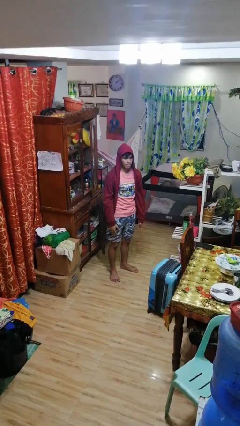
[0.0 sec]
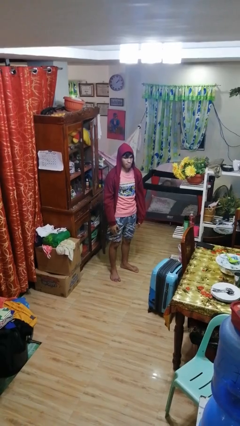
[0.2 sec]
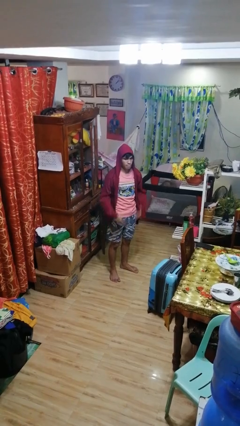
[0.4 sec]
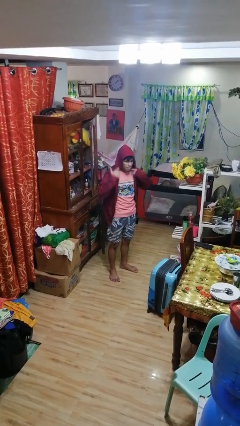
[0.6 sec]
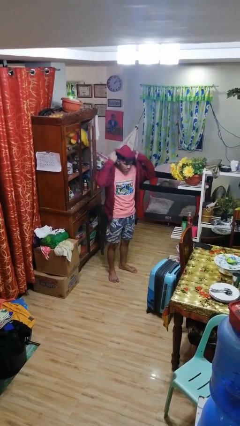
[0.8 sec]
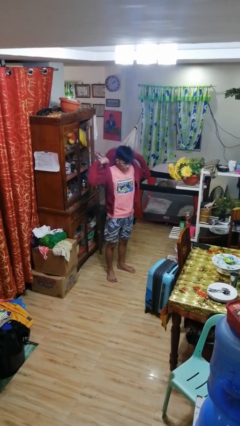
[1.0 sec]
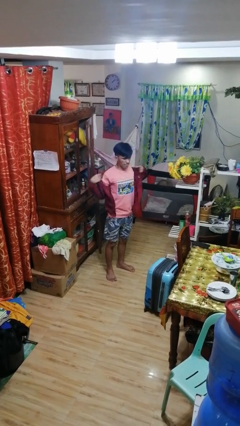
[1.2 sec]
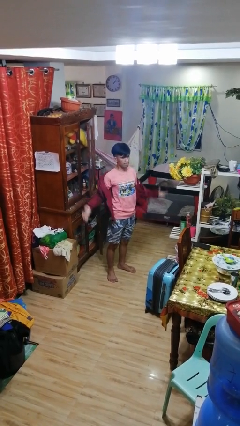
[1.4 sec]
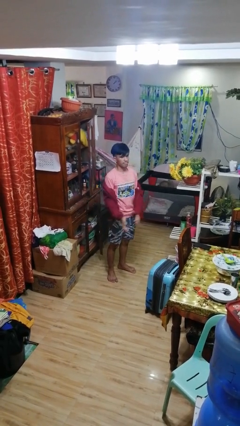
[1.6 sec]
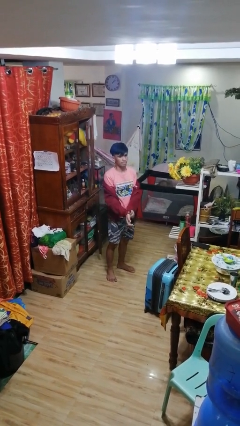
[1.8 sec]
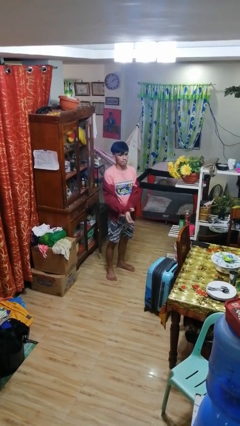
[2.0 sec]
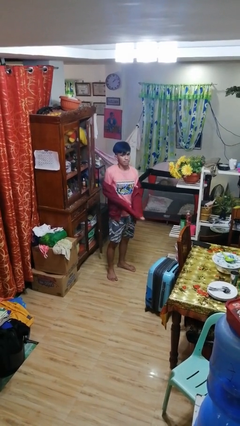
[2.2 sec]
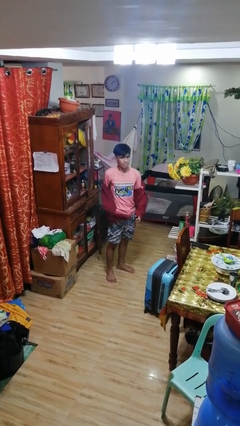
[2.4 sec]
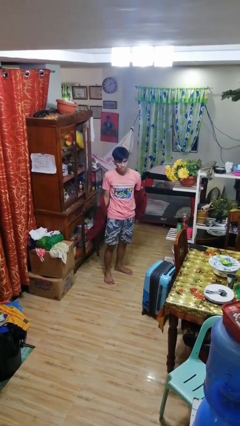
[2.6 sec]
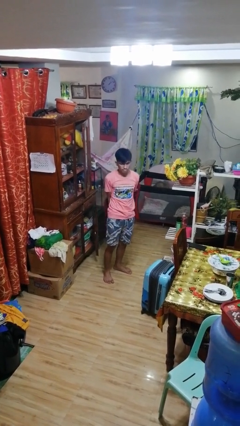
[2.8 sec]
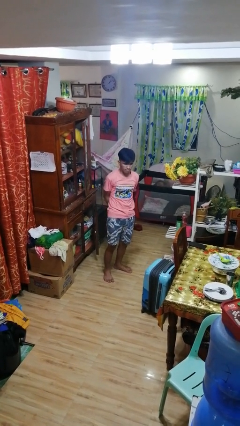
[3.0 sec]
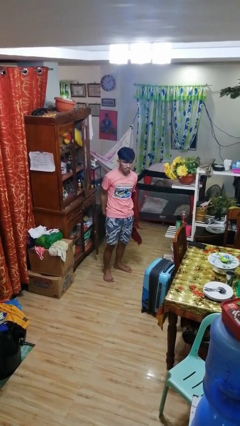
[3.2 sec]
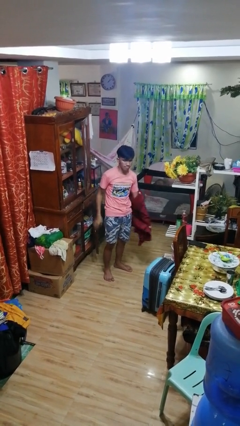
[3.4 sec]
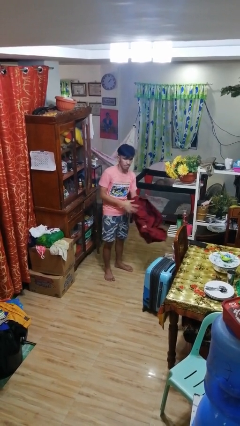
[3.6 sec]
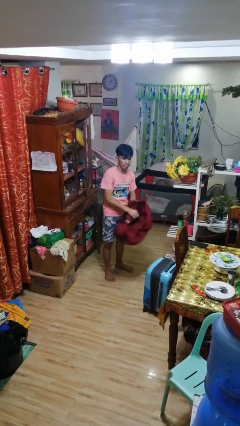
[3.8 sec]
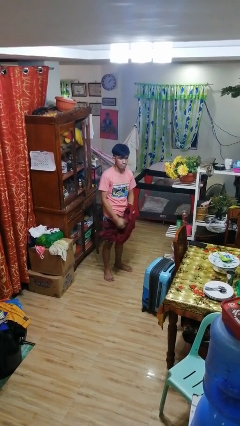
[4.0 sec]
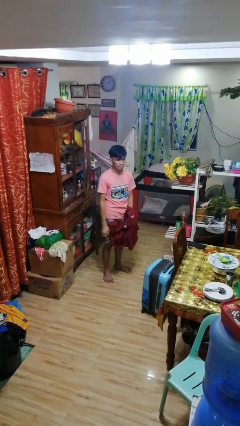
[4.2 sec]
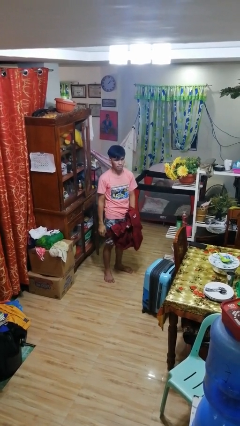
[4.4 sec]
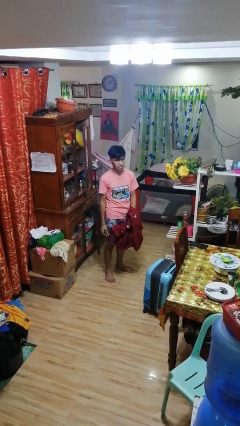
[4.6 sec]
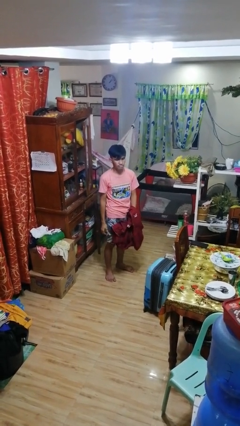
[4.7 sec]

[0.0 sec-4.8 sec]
person takes off hoodie

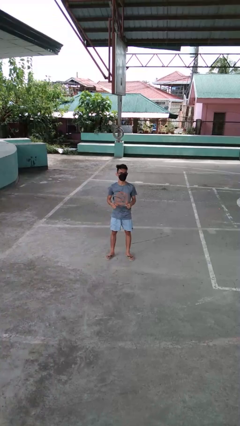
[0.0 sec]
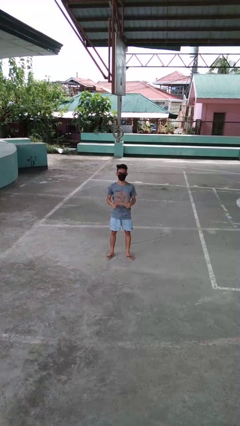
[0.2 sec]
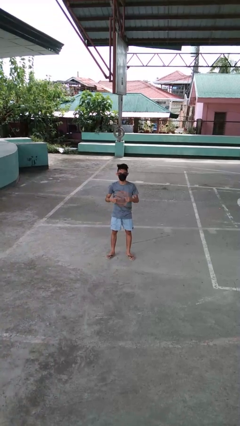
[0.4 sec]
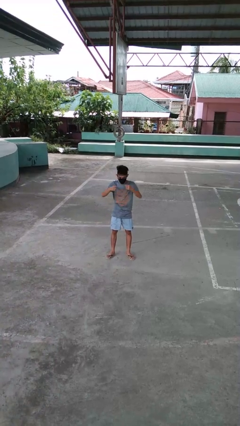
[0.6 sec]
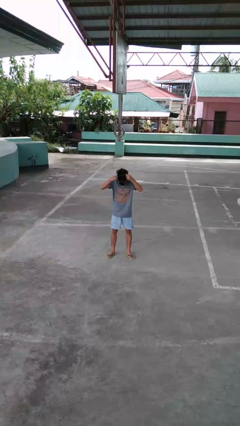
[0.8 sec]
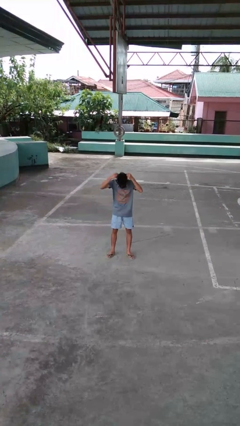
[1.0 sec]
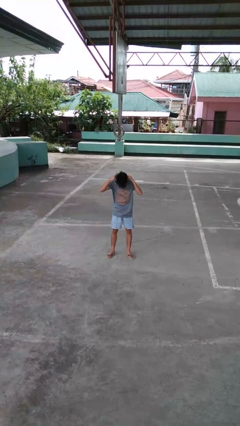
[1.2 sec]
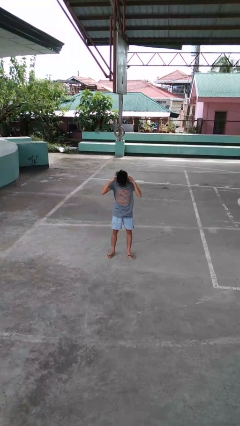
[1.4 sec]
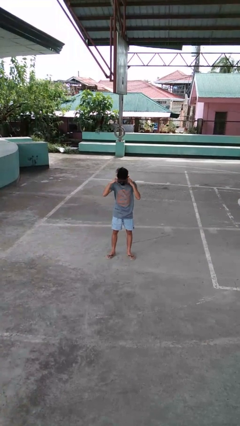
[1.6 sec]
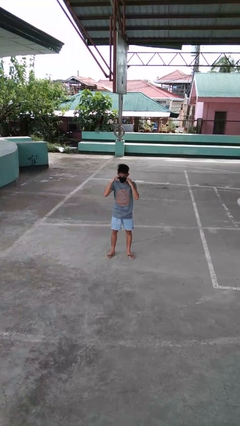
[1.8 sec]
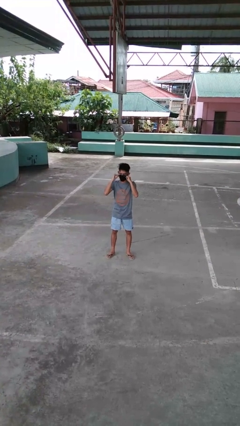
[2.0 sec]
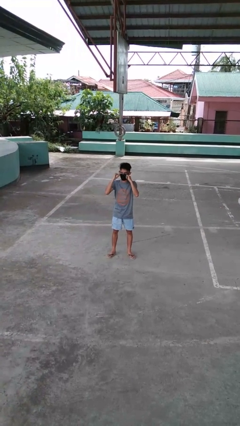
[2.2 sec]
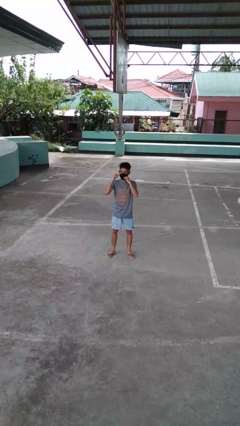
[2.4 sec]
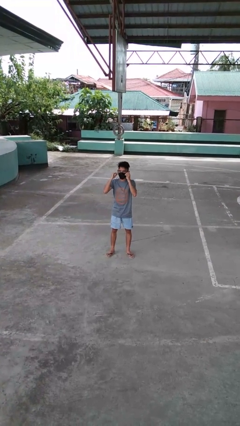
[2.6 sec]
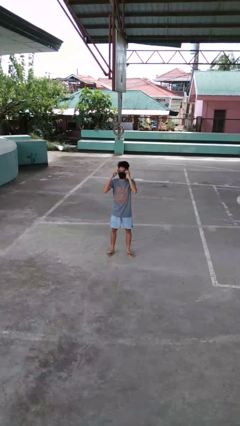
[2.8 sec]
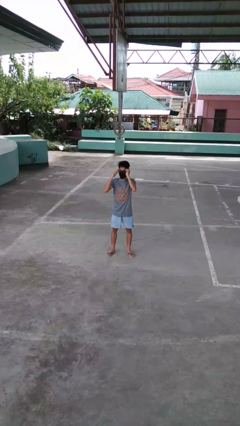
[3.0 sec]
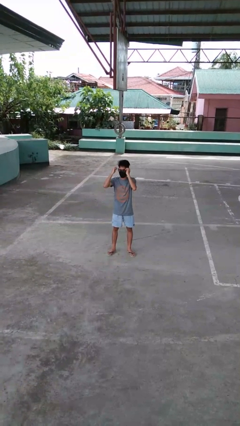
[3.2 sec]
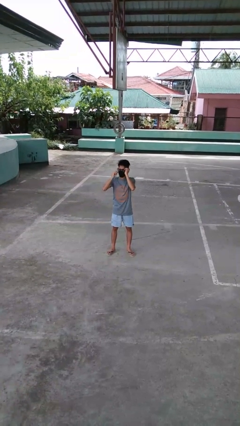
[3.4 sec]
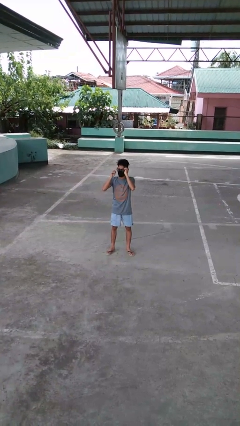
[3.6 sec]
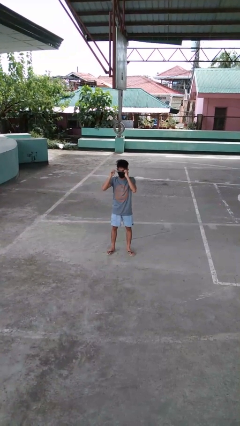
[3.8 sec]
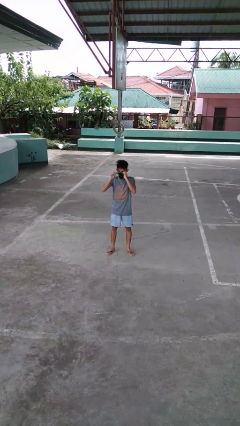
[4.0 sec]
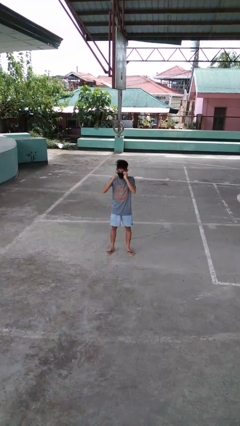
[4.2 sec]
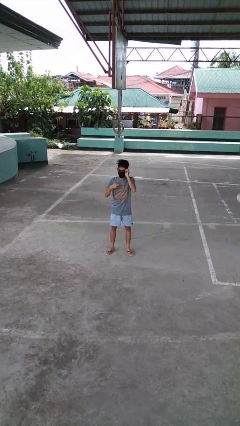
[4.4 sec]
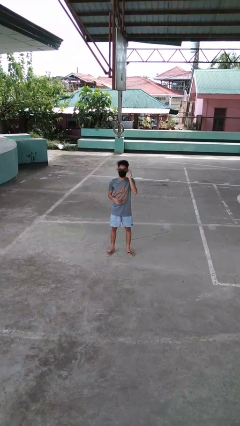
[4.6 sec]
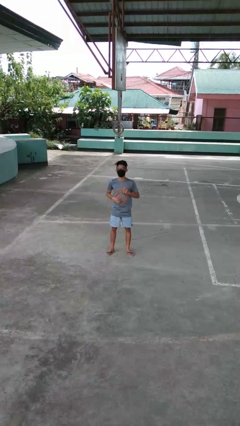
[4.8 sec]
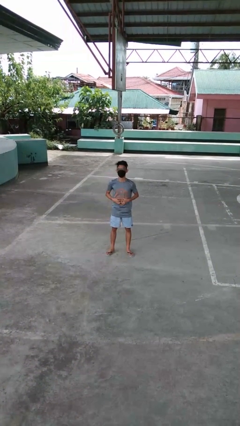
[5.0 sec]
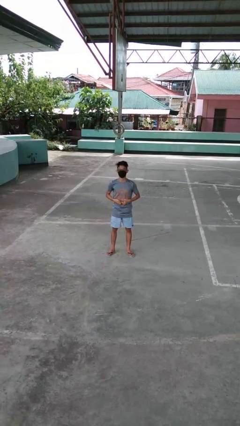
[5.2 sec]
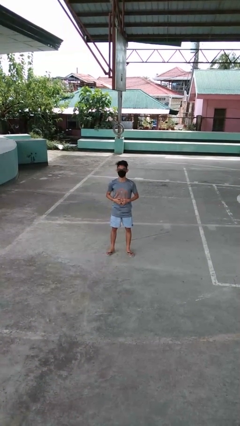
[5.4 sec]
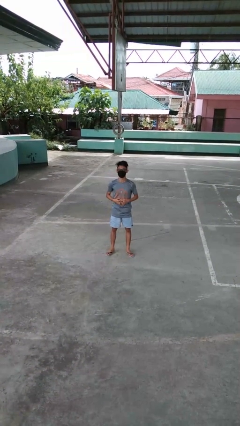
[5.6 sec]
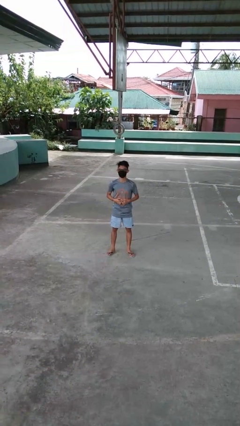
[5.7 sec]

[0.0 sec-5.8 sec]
person puts on necklace

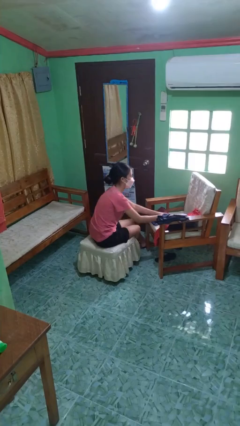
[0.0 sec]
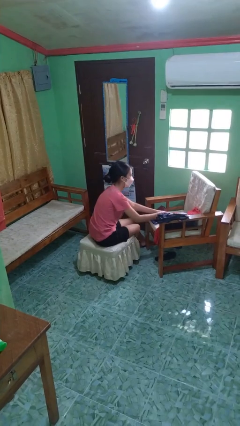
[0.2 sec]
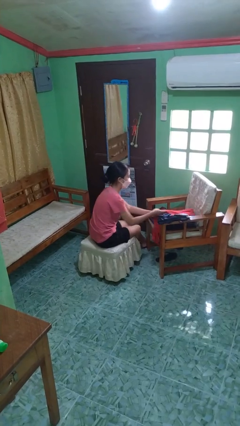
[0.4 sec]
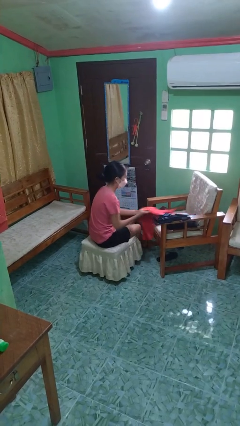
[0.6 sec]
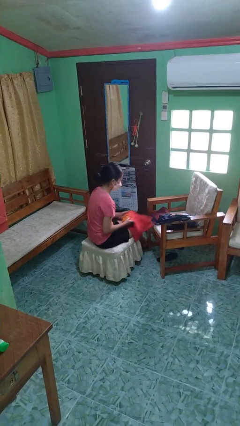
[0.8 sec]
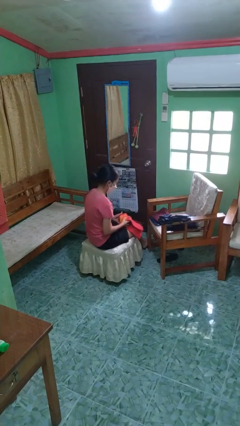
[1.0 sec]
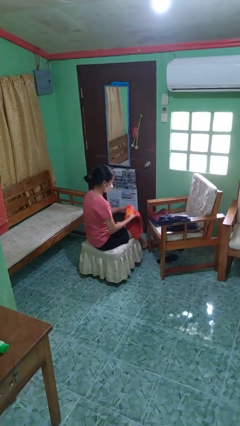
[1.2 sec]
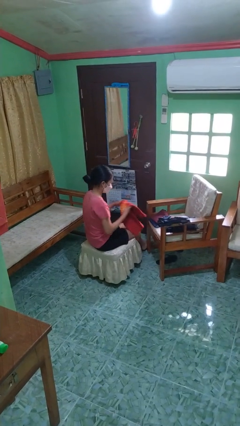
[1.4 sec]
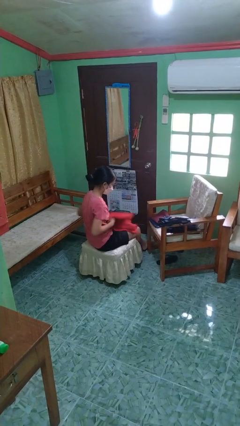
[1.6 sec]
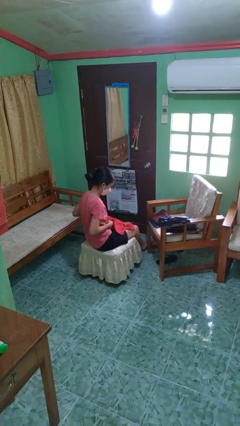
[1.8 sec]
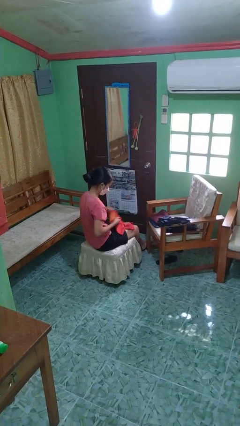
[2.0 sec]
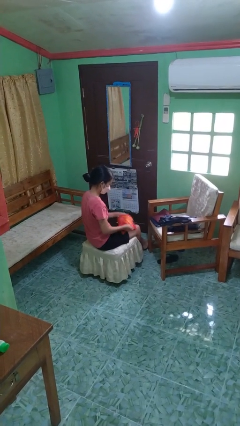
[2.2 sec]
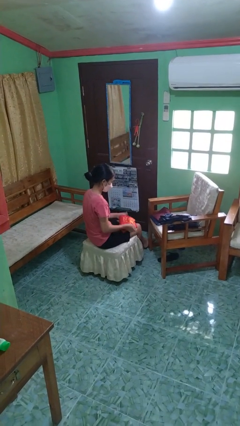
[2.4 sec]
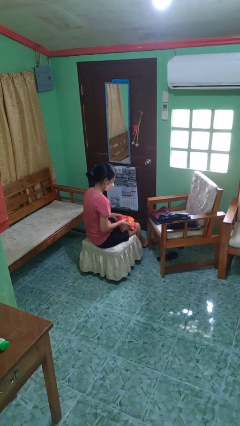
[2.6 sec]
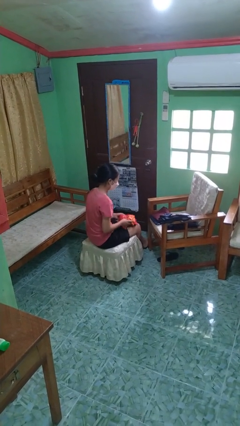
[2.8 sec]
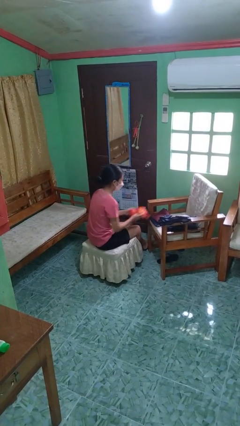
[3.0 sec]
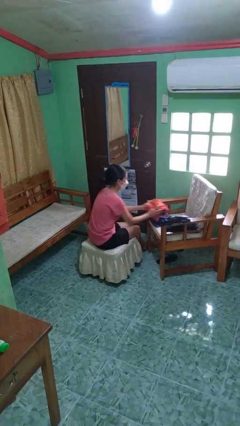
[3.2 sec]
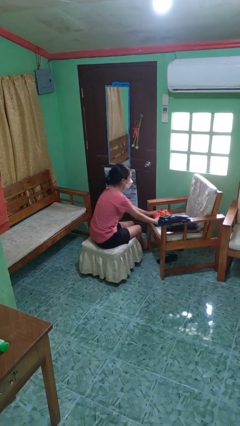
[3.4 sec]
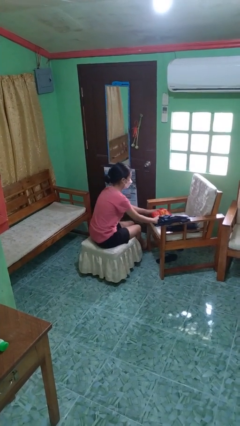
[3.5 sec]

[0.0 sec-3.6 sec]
person folds shirt

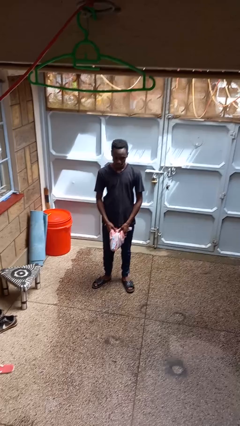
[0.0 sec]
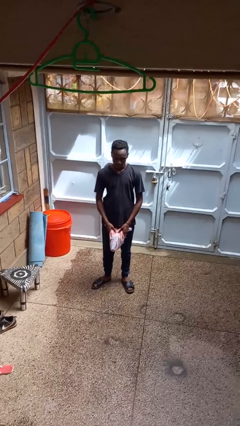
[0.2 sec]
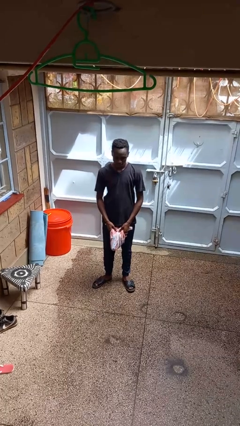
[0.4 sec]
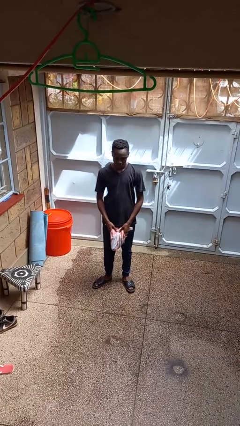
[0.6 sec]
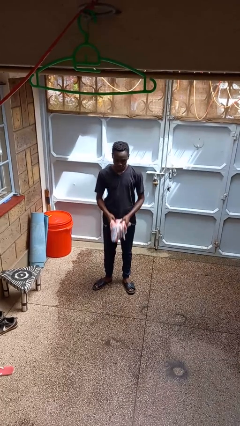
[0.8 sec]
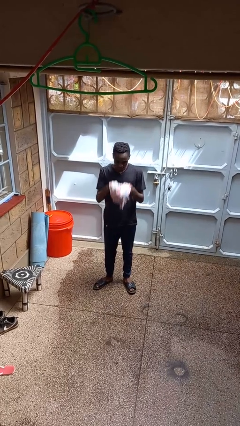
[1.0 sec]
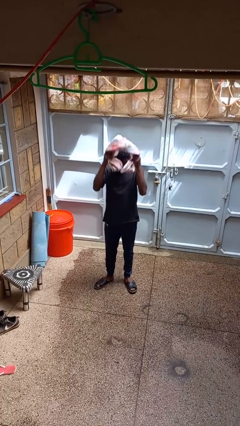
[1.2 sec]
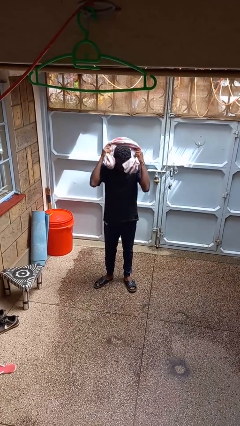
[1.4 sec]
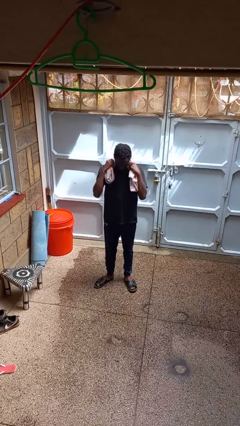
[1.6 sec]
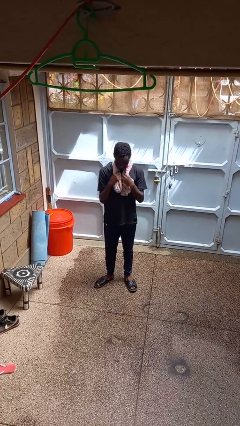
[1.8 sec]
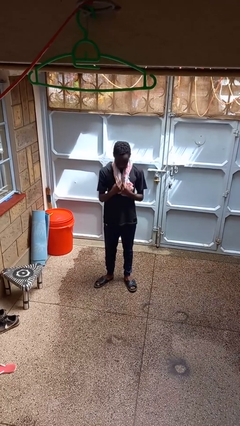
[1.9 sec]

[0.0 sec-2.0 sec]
person puts on scarf

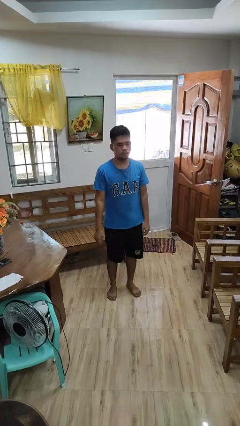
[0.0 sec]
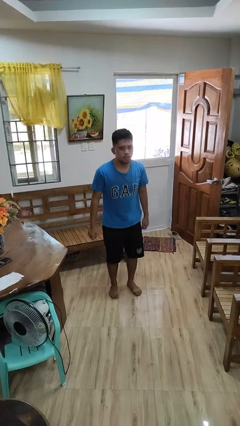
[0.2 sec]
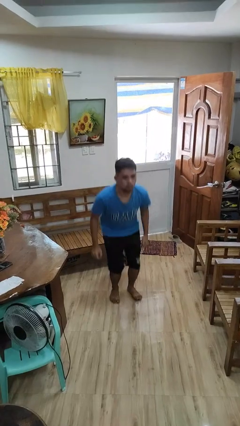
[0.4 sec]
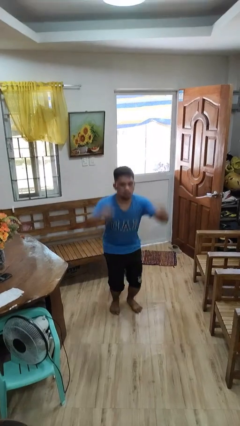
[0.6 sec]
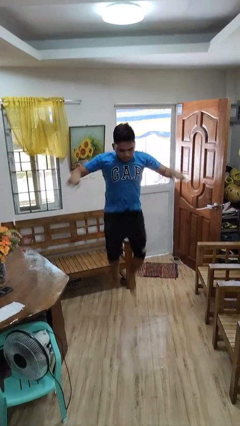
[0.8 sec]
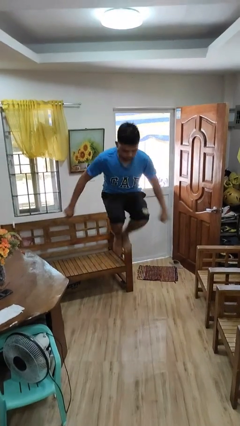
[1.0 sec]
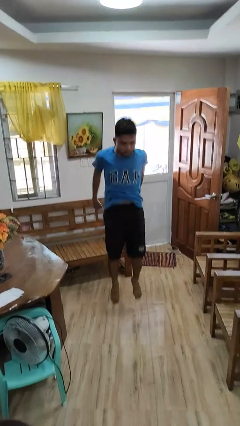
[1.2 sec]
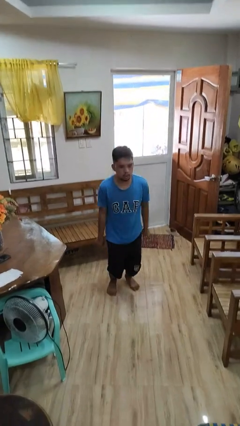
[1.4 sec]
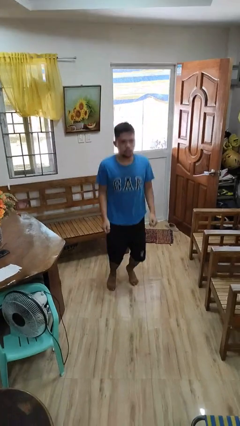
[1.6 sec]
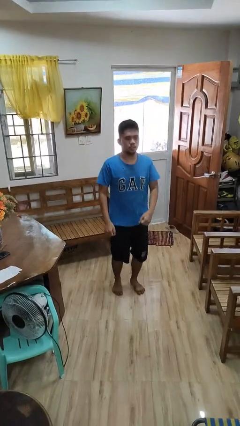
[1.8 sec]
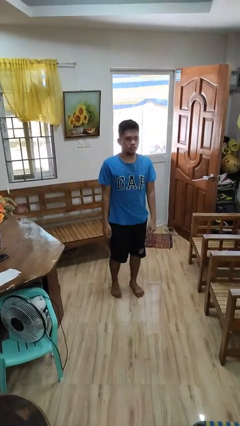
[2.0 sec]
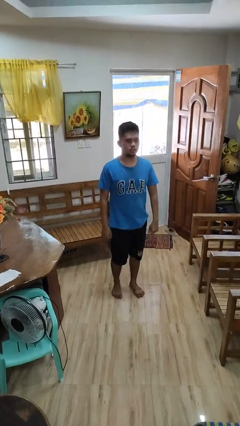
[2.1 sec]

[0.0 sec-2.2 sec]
person jumps
